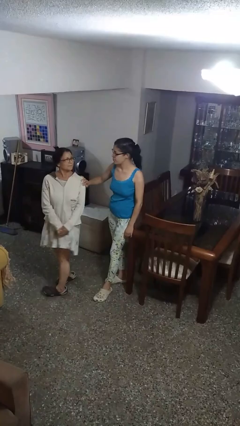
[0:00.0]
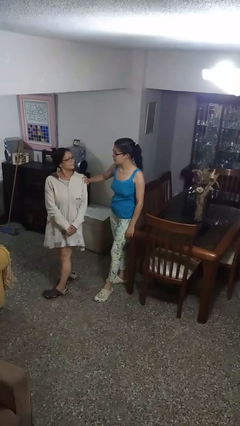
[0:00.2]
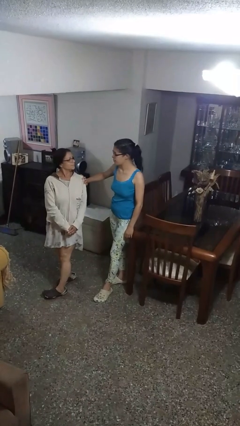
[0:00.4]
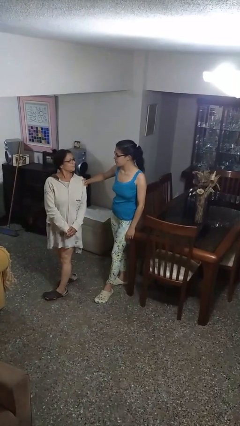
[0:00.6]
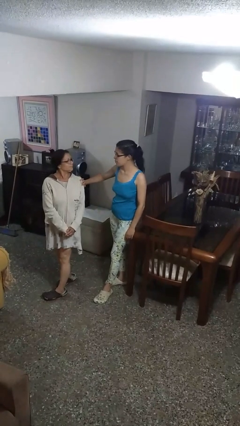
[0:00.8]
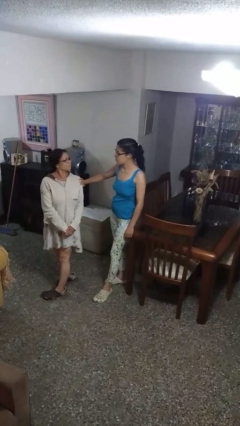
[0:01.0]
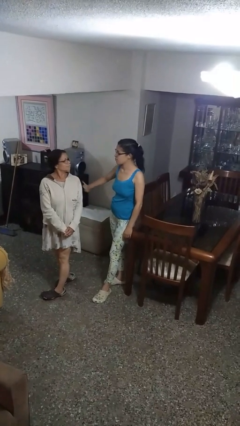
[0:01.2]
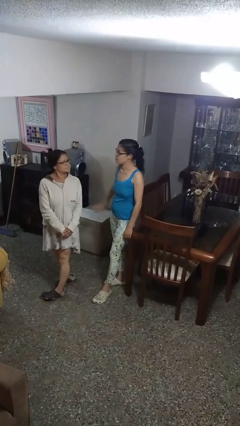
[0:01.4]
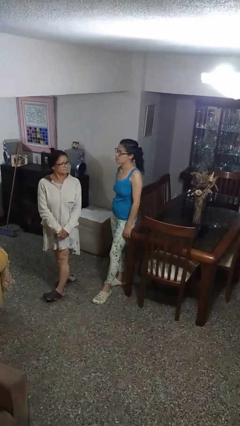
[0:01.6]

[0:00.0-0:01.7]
person spins person around

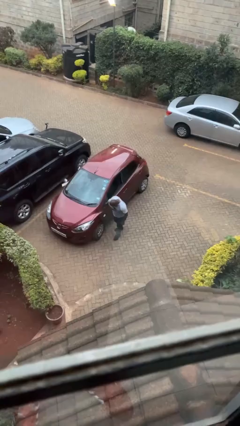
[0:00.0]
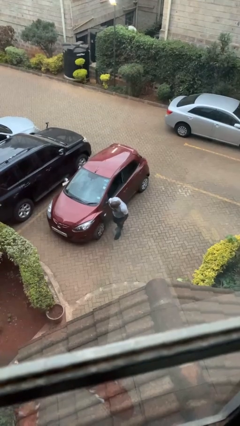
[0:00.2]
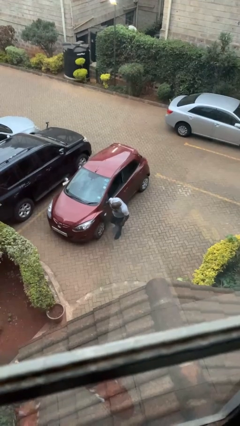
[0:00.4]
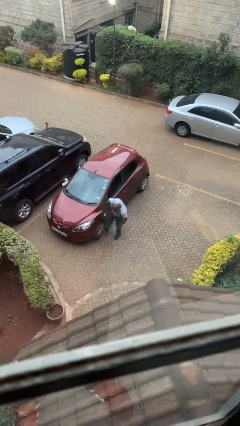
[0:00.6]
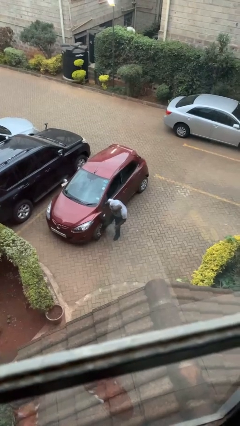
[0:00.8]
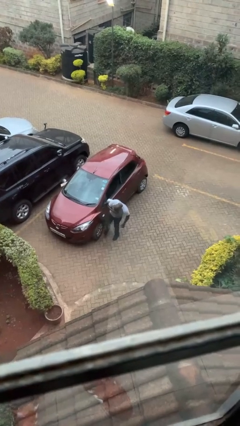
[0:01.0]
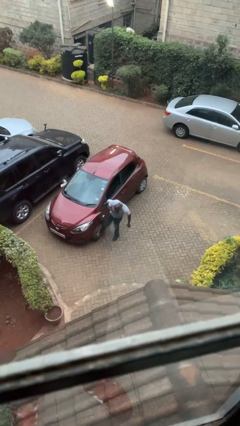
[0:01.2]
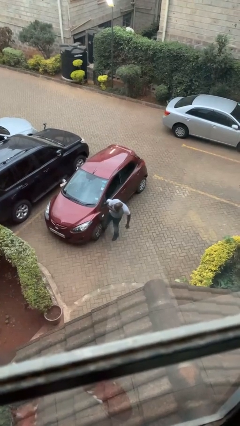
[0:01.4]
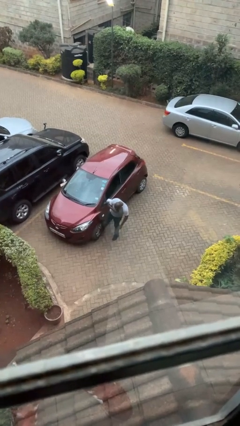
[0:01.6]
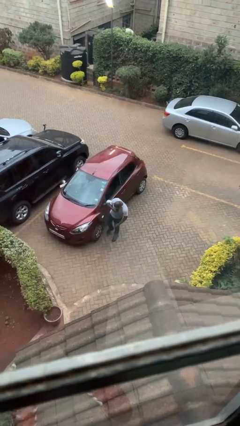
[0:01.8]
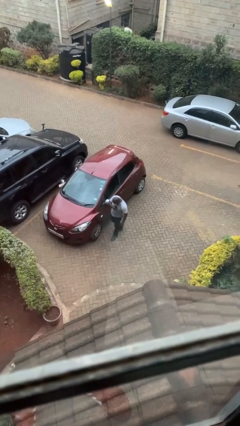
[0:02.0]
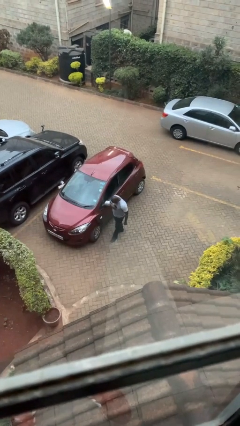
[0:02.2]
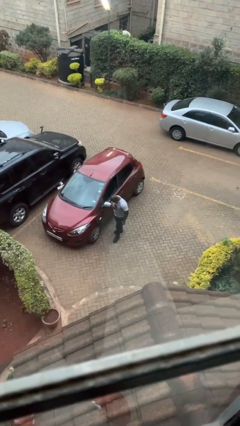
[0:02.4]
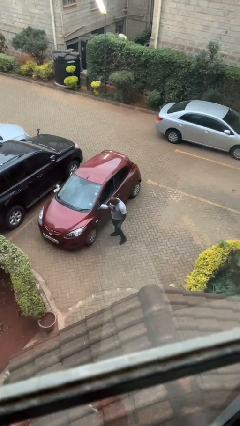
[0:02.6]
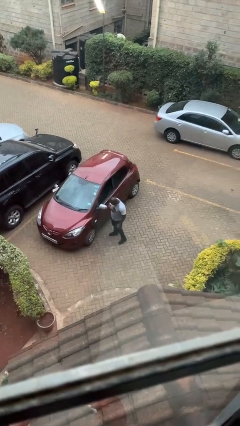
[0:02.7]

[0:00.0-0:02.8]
person kicks car tires

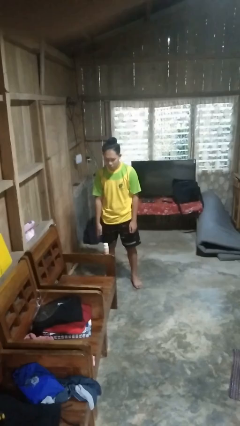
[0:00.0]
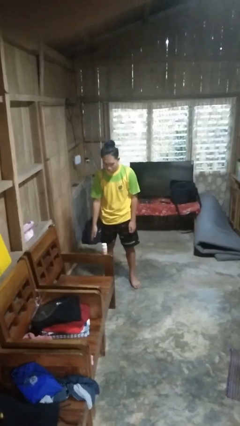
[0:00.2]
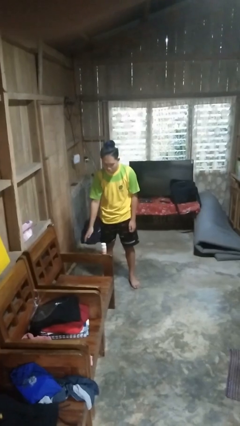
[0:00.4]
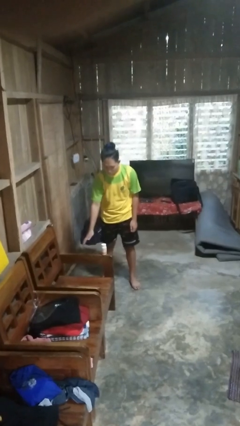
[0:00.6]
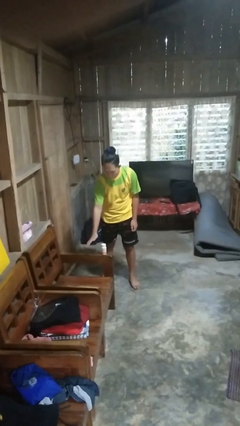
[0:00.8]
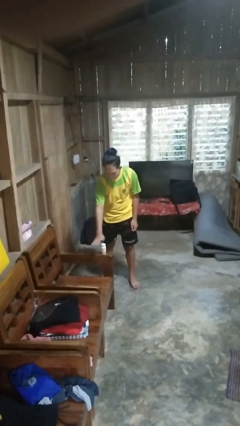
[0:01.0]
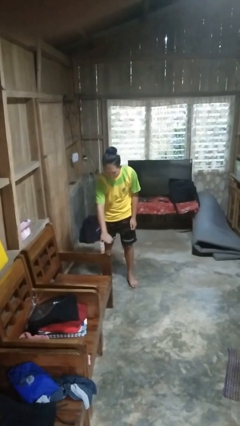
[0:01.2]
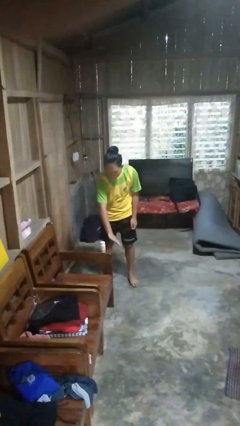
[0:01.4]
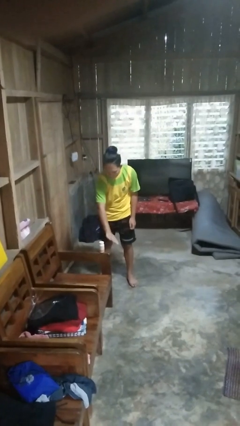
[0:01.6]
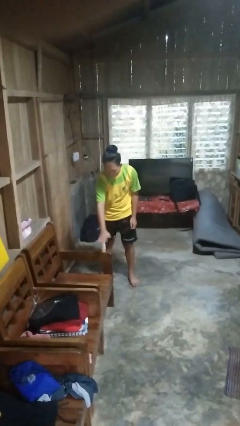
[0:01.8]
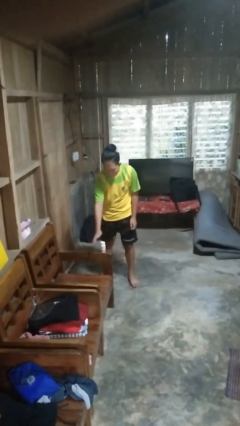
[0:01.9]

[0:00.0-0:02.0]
person waves hand over object

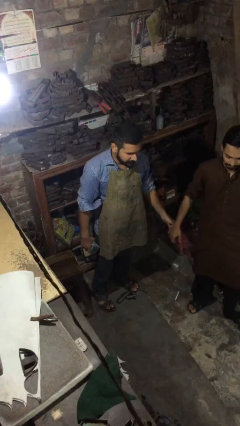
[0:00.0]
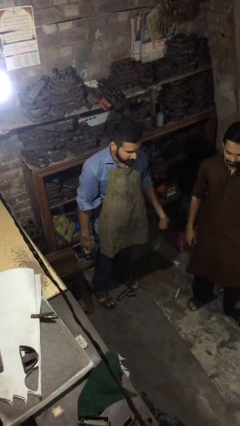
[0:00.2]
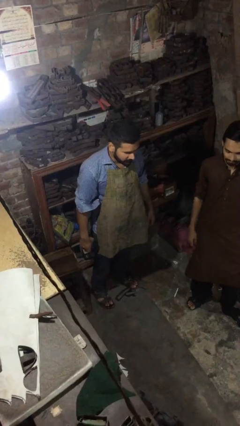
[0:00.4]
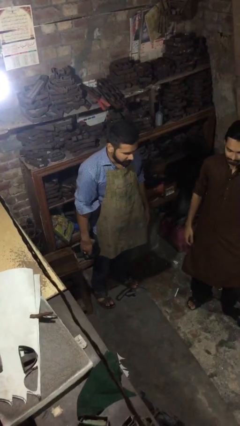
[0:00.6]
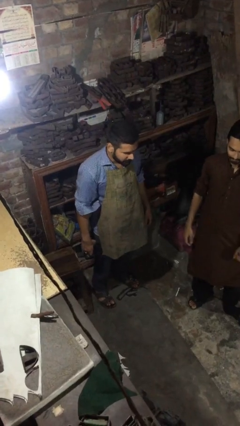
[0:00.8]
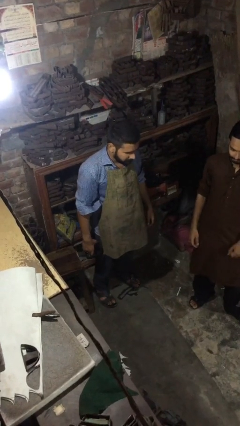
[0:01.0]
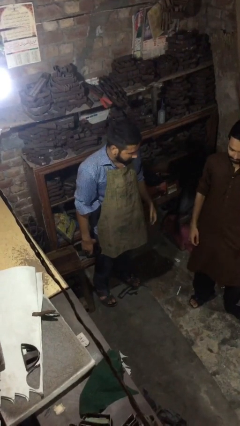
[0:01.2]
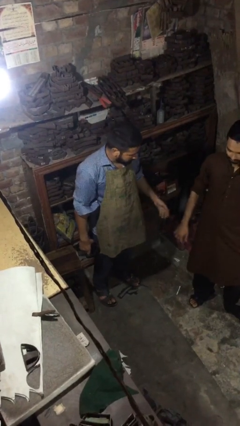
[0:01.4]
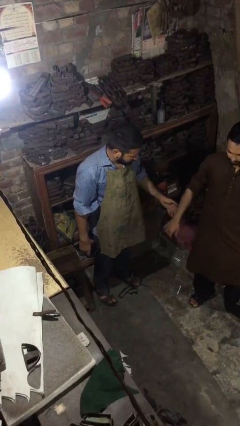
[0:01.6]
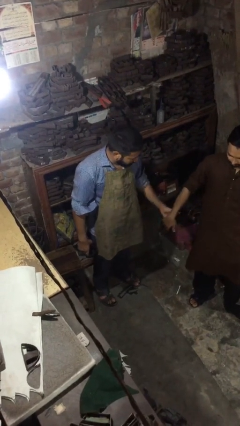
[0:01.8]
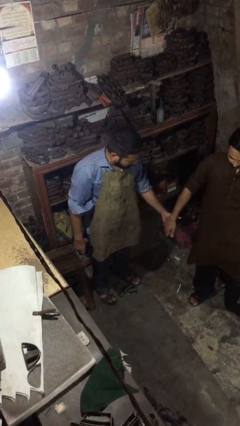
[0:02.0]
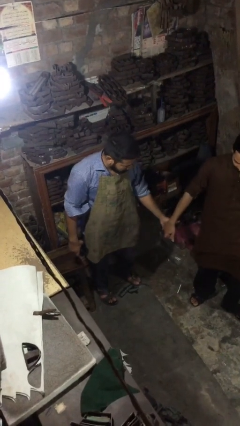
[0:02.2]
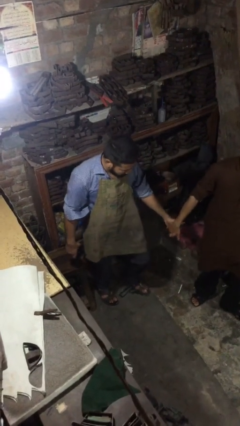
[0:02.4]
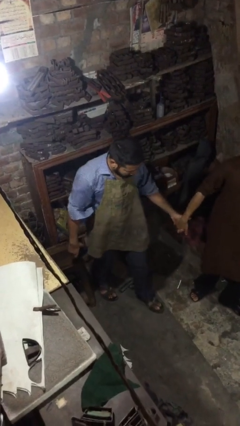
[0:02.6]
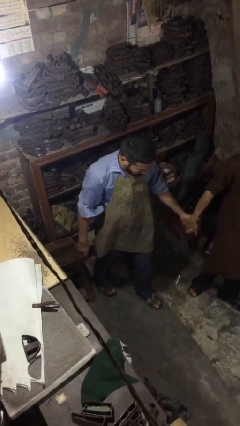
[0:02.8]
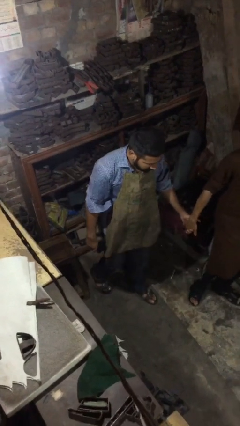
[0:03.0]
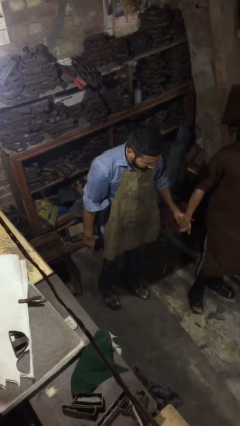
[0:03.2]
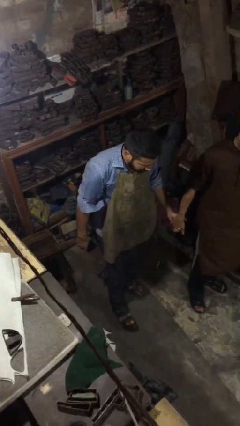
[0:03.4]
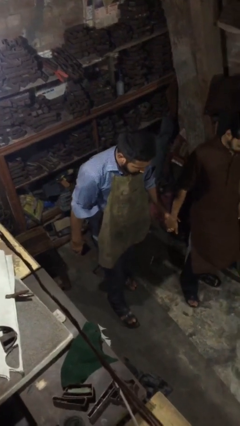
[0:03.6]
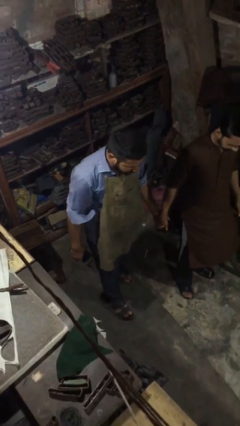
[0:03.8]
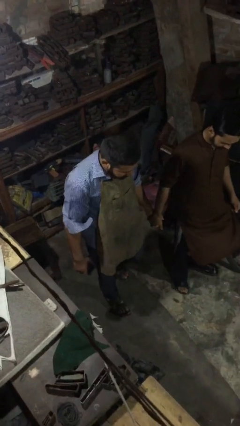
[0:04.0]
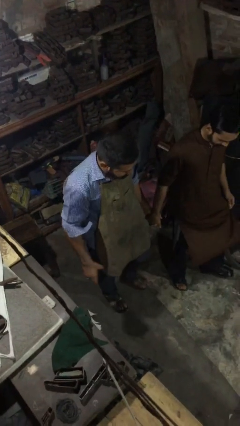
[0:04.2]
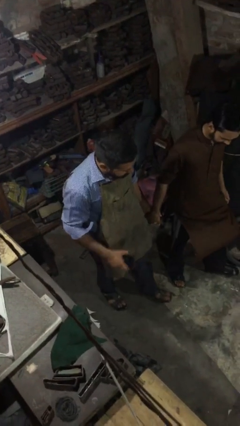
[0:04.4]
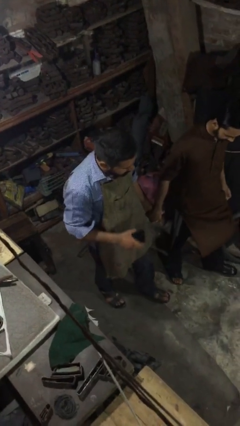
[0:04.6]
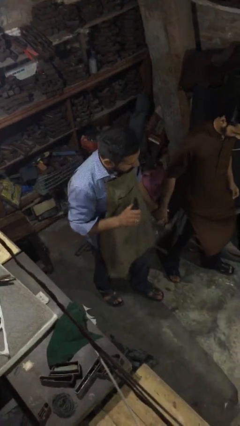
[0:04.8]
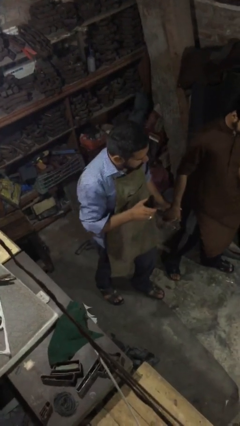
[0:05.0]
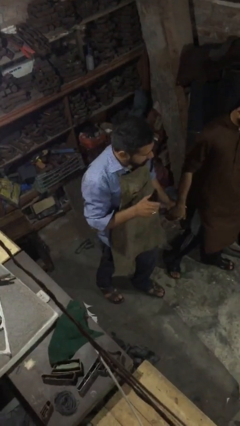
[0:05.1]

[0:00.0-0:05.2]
person holds hand

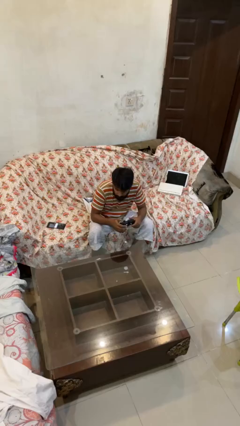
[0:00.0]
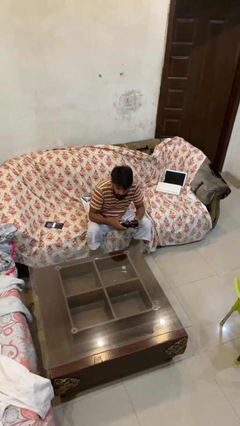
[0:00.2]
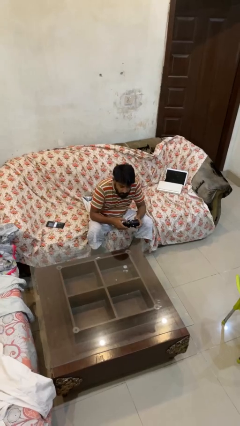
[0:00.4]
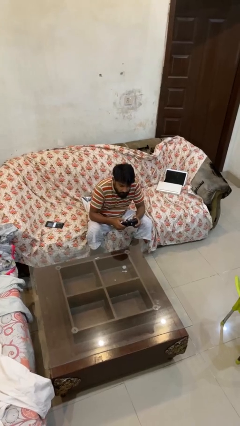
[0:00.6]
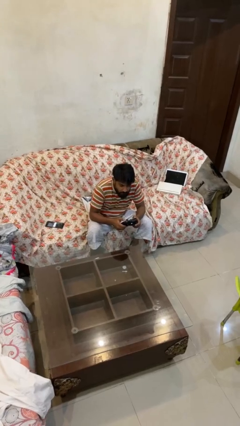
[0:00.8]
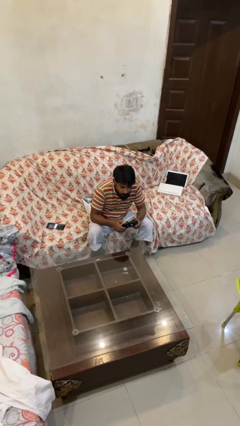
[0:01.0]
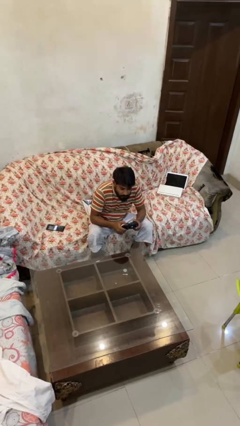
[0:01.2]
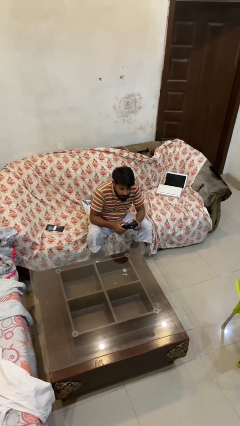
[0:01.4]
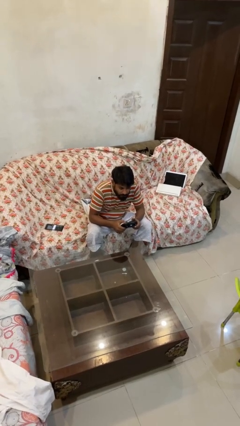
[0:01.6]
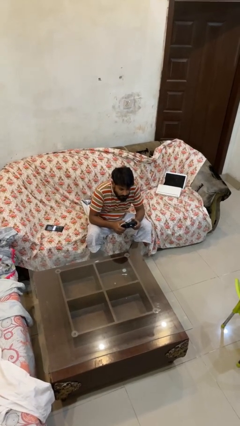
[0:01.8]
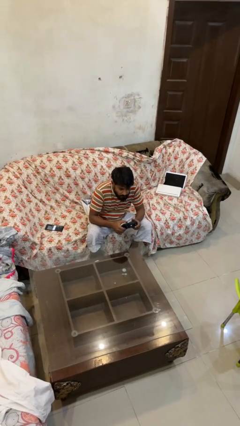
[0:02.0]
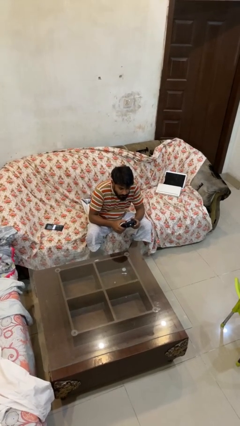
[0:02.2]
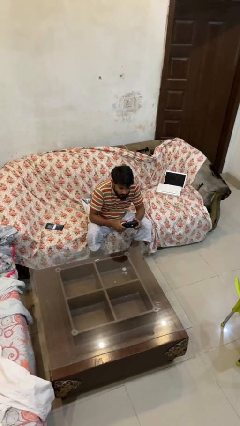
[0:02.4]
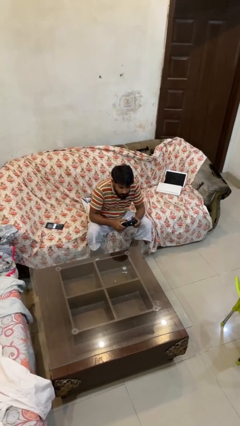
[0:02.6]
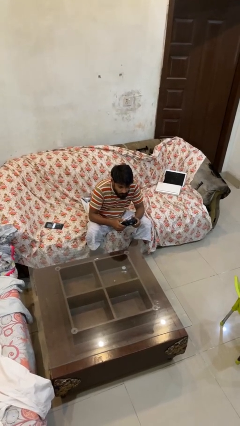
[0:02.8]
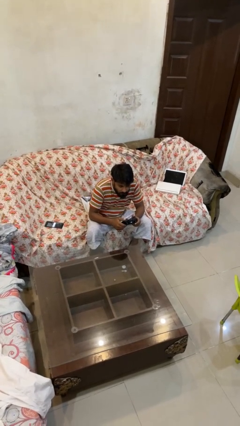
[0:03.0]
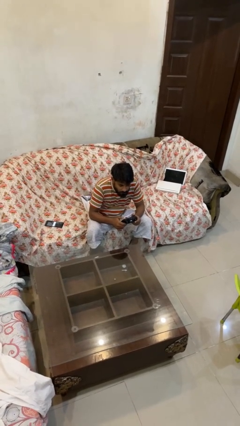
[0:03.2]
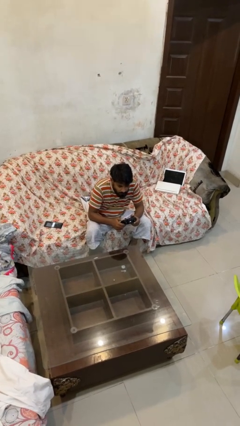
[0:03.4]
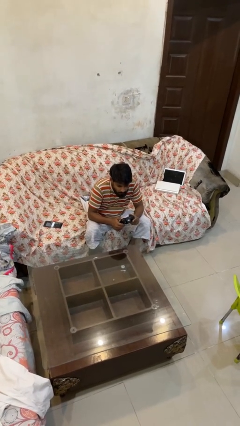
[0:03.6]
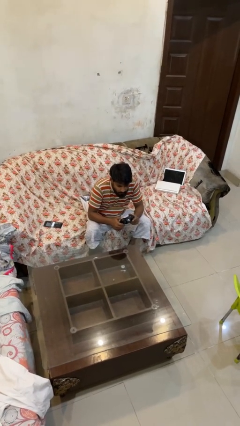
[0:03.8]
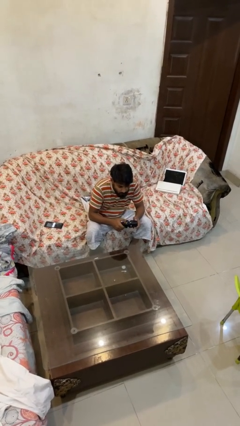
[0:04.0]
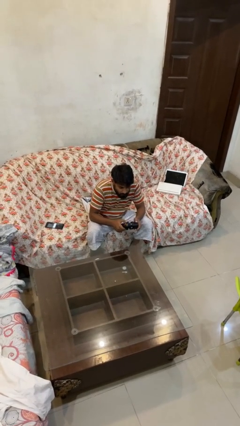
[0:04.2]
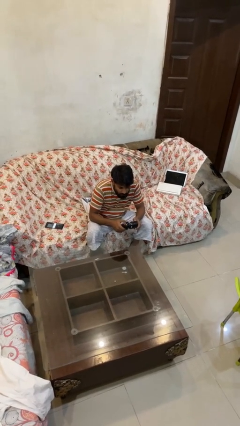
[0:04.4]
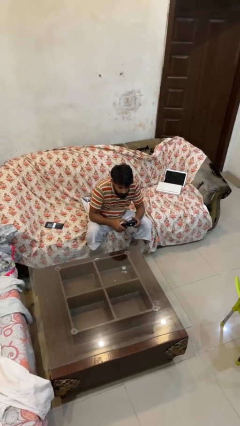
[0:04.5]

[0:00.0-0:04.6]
person interacts with handheld game

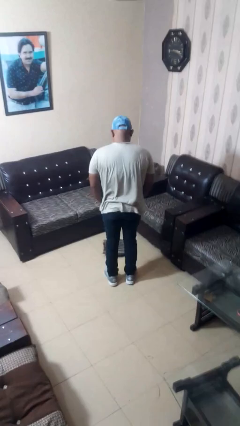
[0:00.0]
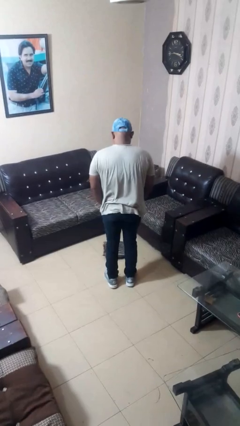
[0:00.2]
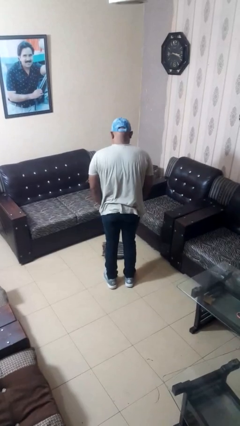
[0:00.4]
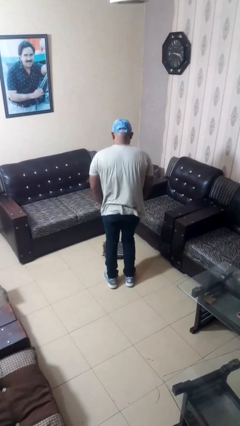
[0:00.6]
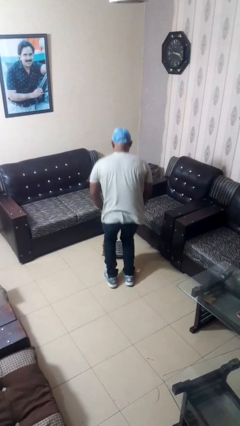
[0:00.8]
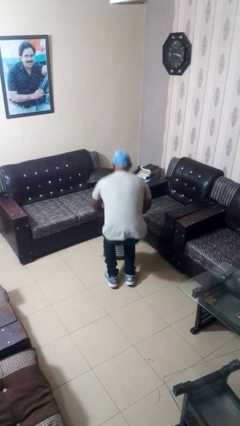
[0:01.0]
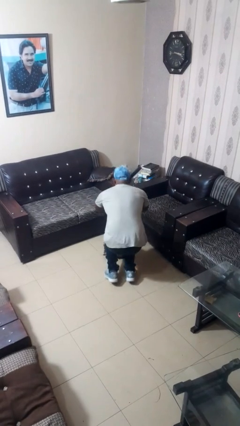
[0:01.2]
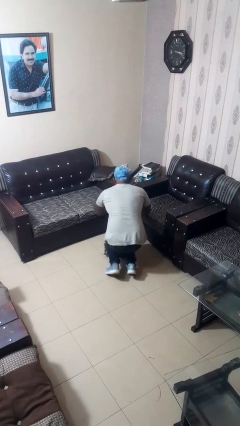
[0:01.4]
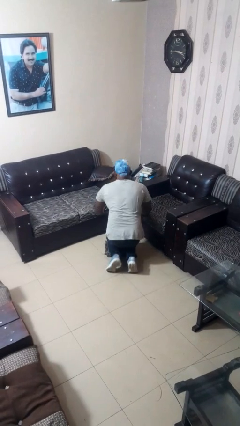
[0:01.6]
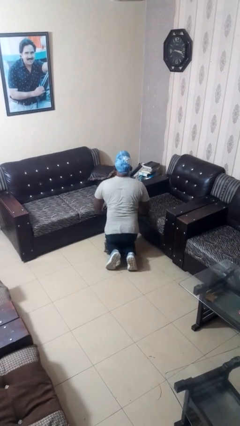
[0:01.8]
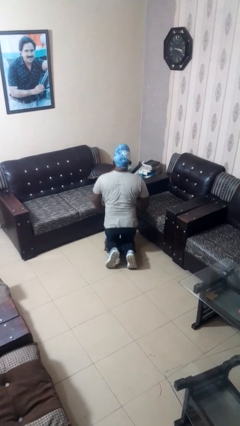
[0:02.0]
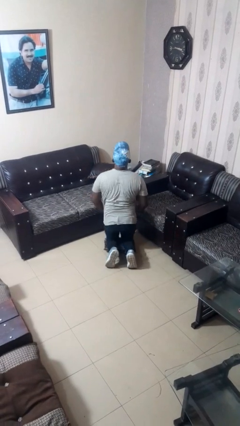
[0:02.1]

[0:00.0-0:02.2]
person kneels
